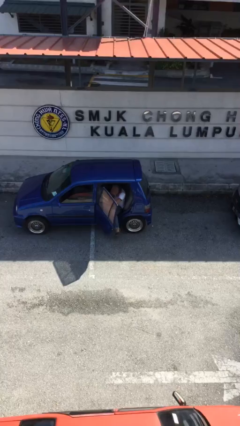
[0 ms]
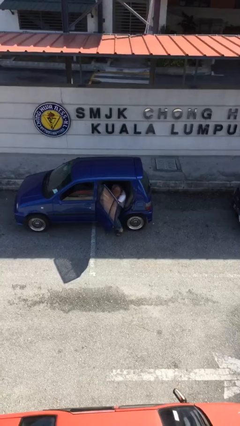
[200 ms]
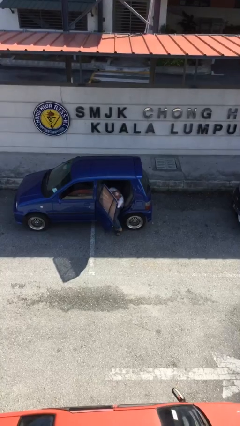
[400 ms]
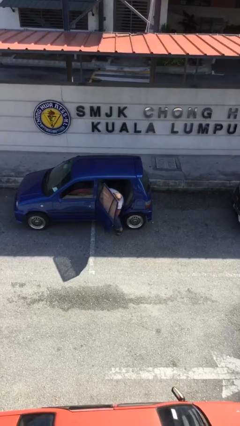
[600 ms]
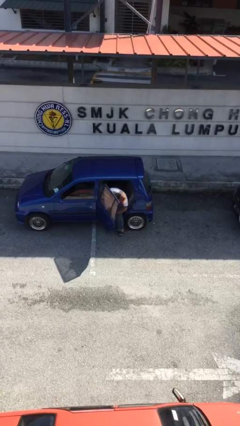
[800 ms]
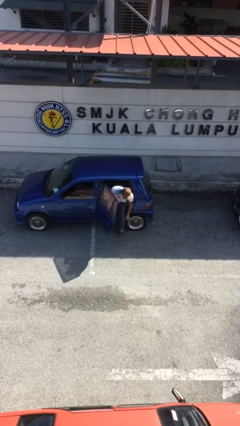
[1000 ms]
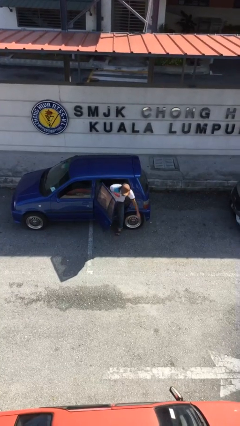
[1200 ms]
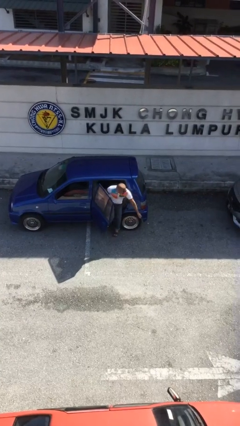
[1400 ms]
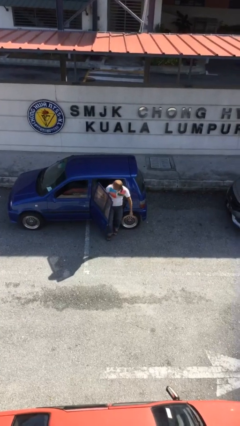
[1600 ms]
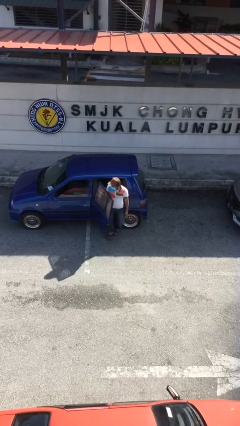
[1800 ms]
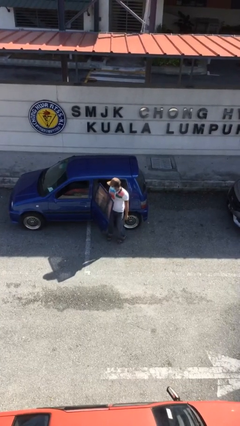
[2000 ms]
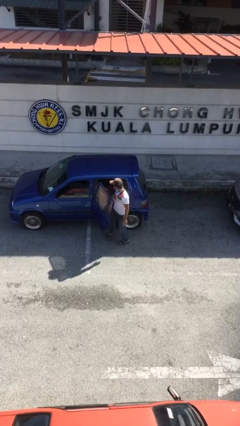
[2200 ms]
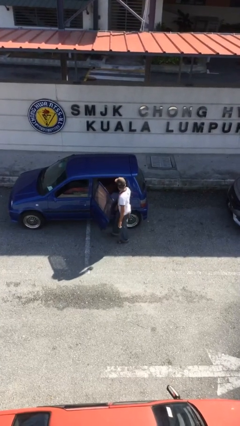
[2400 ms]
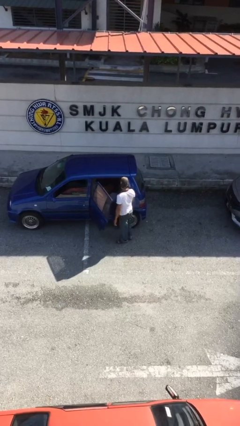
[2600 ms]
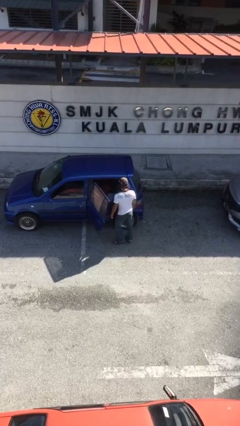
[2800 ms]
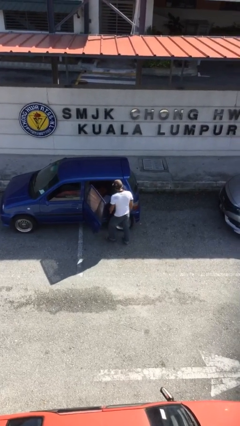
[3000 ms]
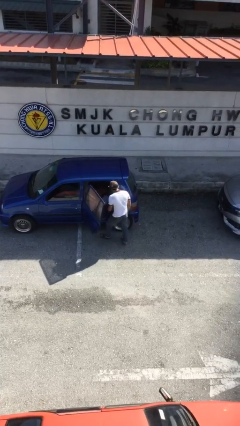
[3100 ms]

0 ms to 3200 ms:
person exits car

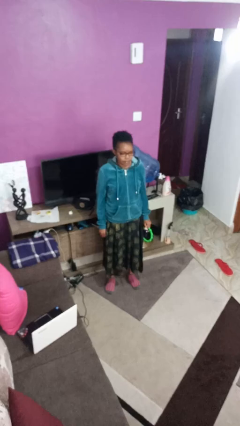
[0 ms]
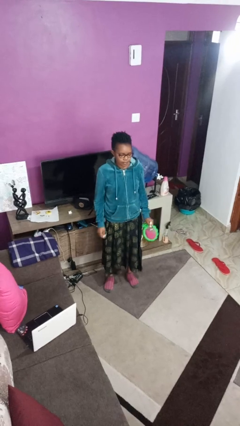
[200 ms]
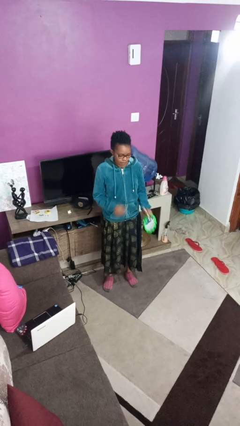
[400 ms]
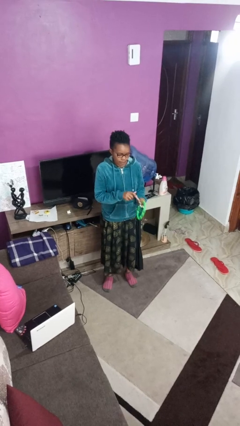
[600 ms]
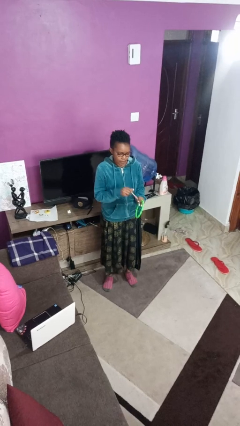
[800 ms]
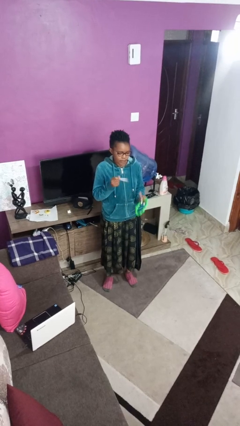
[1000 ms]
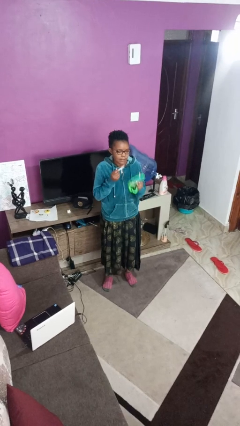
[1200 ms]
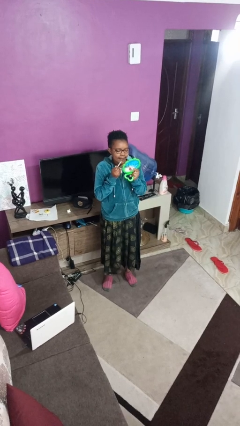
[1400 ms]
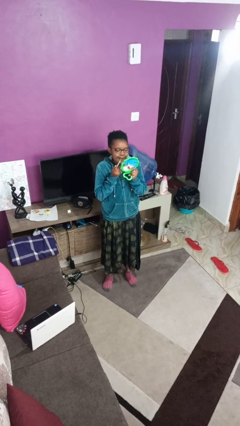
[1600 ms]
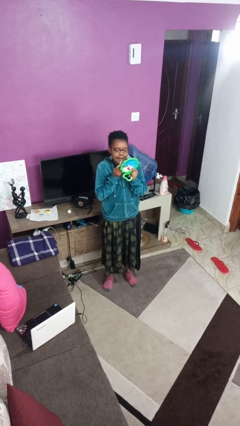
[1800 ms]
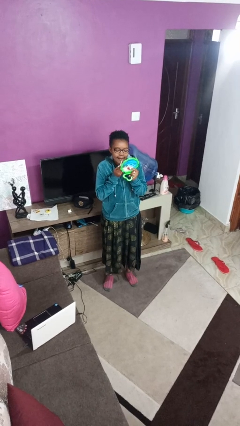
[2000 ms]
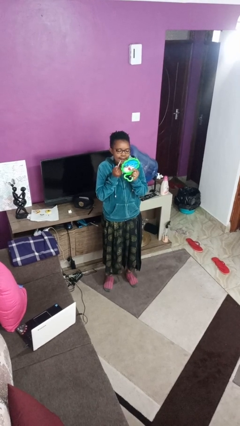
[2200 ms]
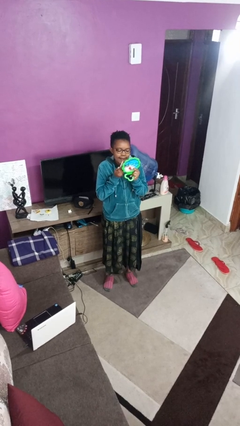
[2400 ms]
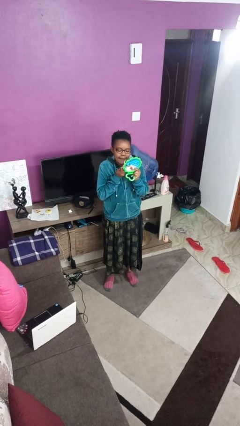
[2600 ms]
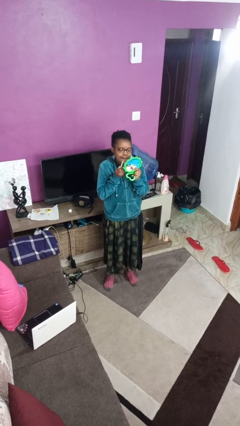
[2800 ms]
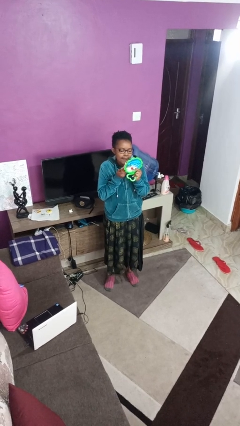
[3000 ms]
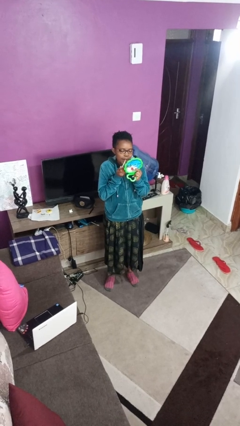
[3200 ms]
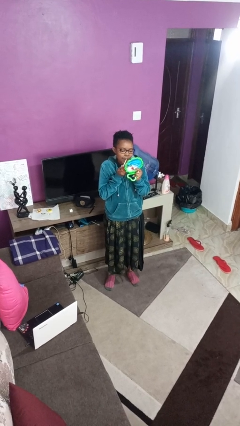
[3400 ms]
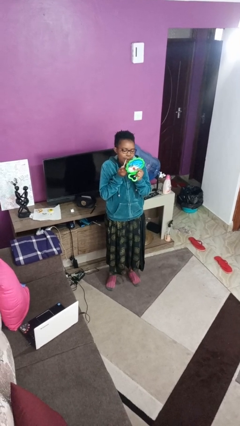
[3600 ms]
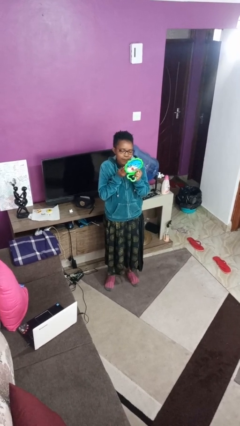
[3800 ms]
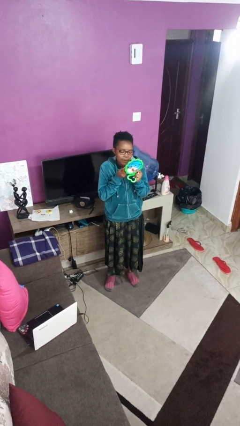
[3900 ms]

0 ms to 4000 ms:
person applies lip makeup

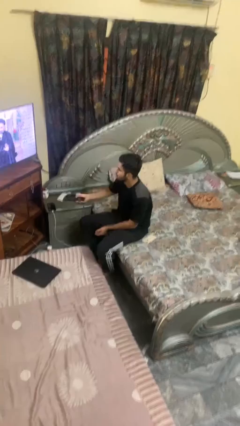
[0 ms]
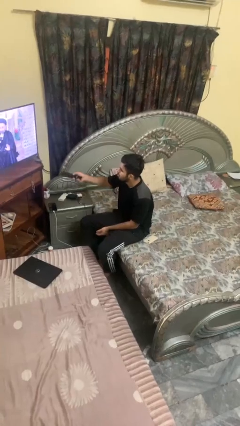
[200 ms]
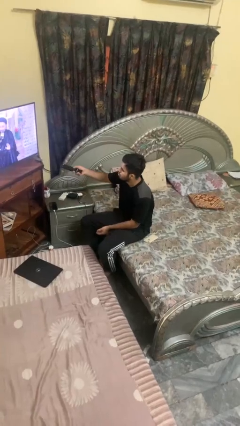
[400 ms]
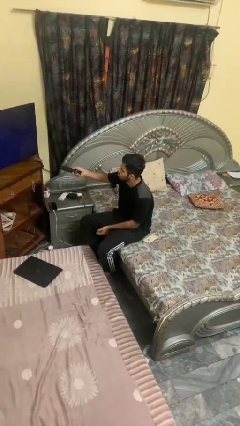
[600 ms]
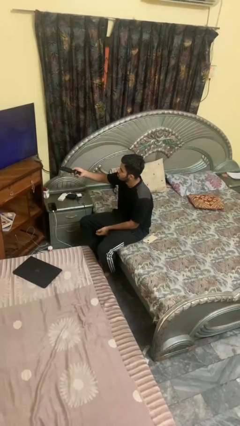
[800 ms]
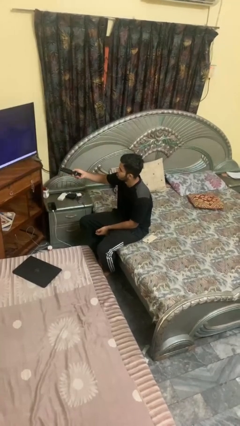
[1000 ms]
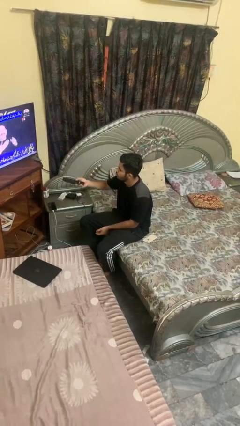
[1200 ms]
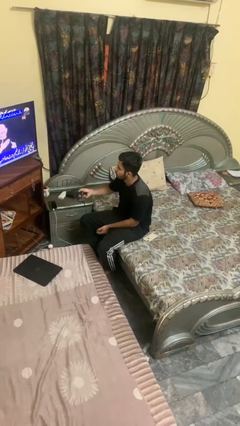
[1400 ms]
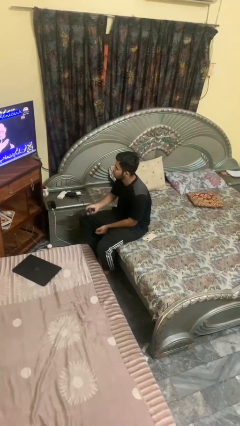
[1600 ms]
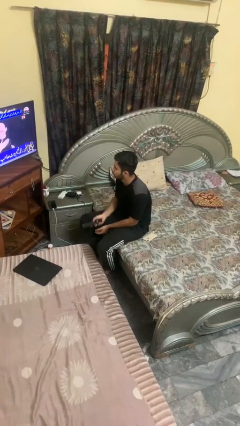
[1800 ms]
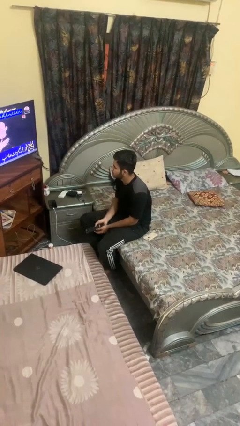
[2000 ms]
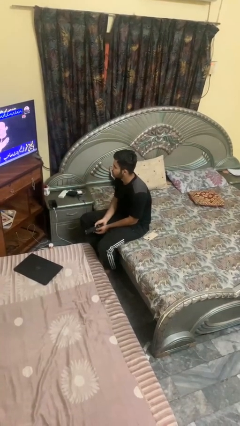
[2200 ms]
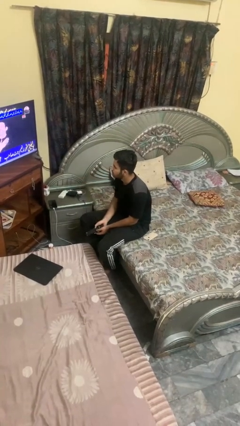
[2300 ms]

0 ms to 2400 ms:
person uses television remote

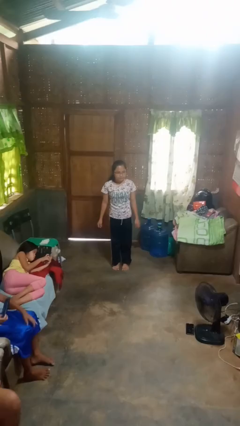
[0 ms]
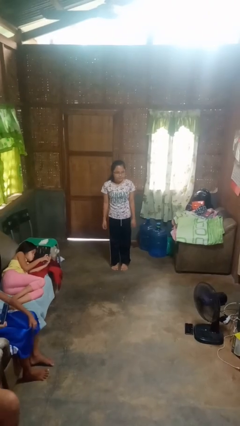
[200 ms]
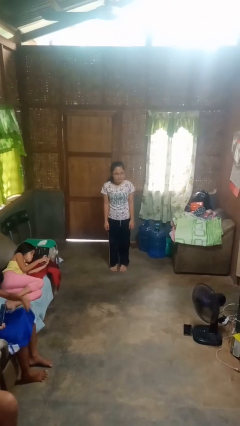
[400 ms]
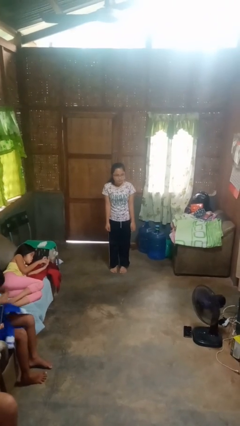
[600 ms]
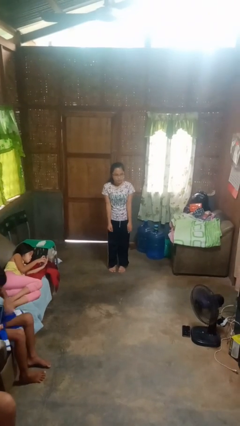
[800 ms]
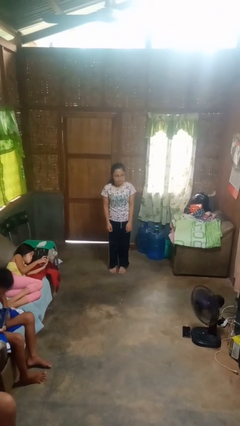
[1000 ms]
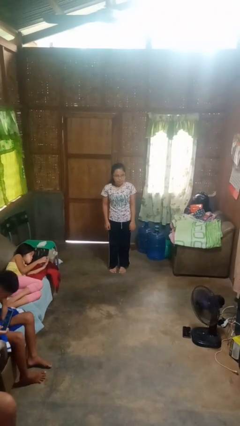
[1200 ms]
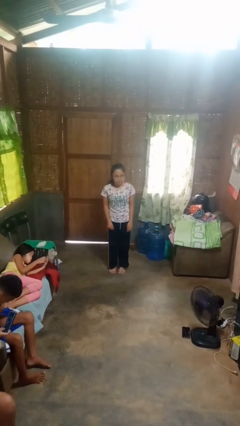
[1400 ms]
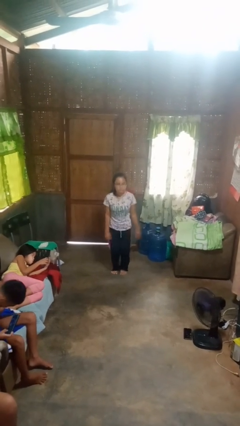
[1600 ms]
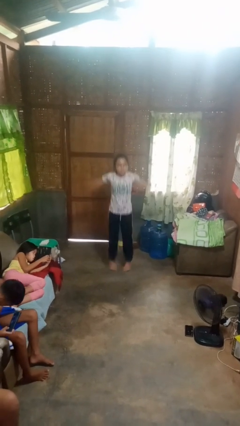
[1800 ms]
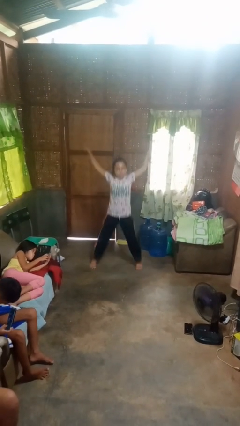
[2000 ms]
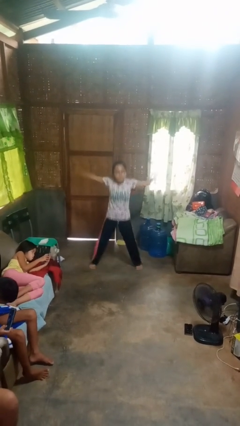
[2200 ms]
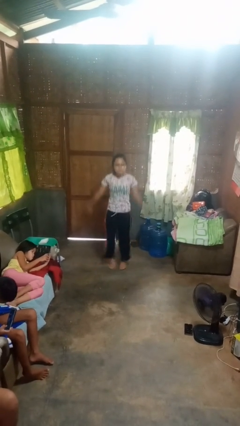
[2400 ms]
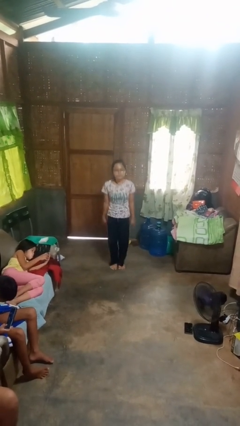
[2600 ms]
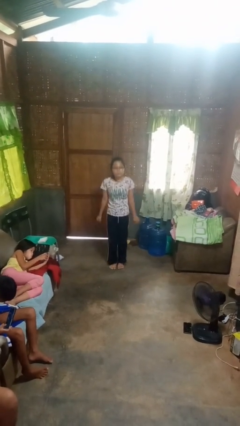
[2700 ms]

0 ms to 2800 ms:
person exercises with jumping jacks

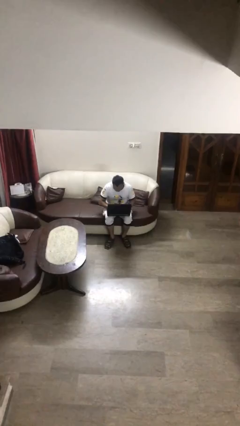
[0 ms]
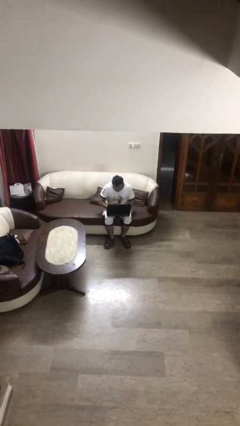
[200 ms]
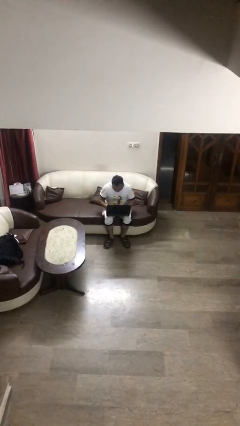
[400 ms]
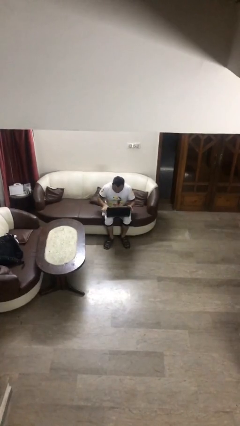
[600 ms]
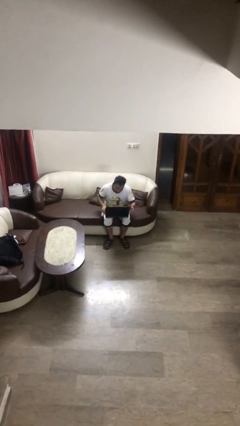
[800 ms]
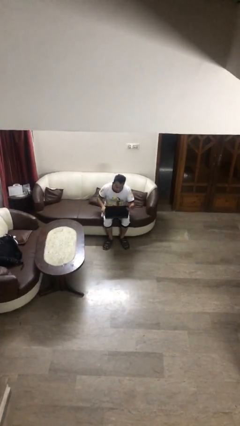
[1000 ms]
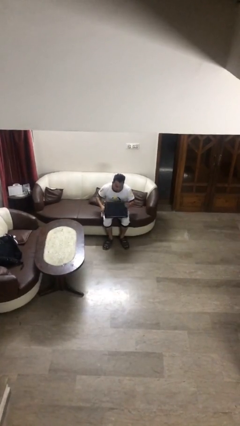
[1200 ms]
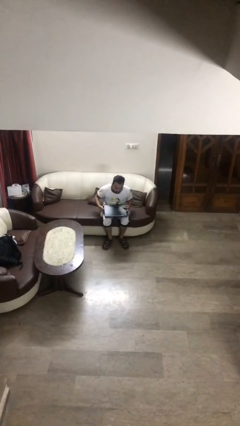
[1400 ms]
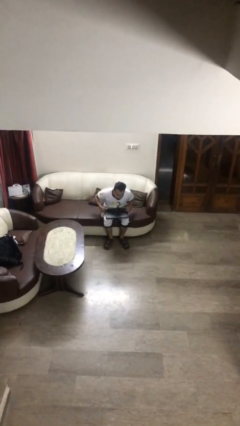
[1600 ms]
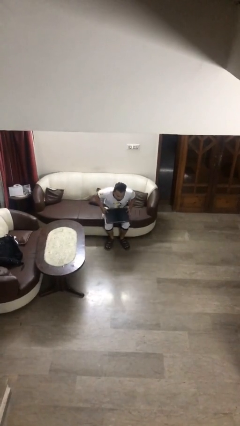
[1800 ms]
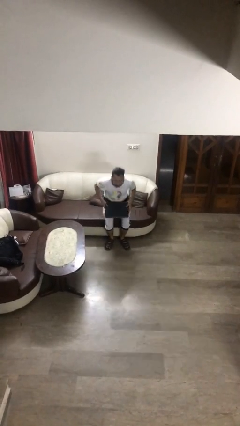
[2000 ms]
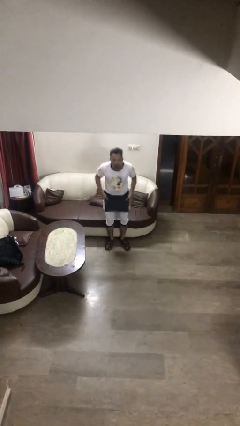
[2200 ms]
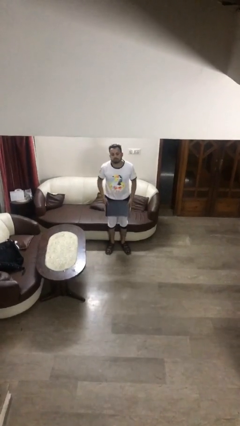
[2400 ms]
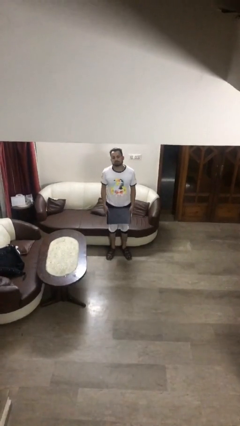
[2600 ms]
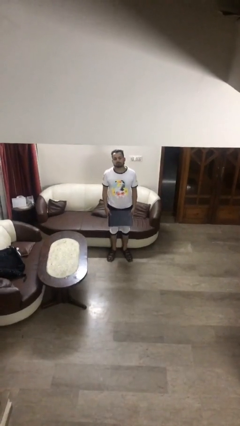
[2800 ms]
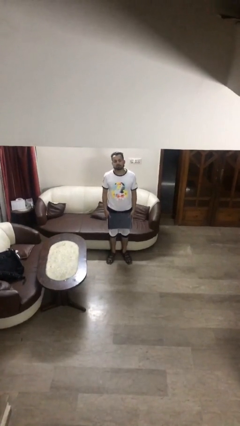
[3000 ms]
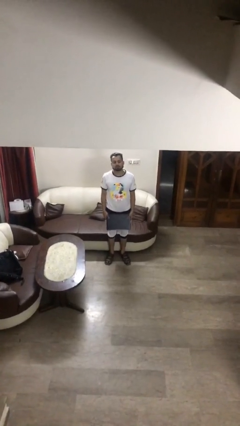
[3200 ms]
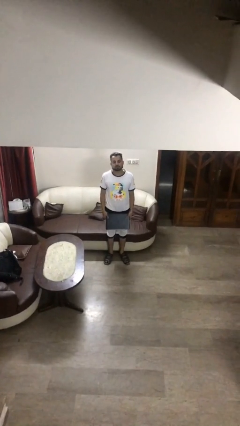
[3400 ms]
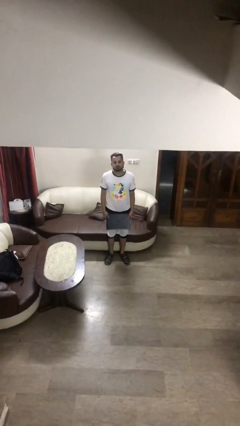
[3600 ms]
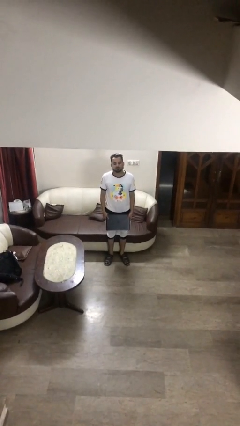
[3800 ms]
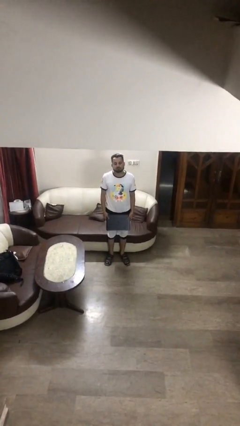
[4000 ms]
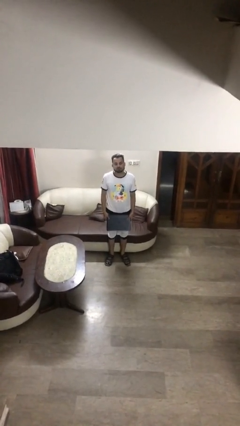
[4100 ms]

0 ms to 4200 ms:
person stands up

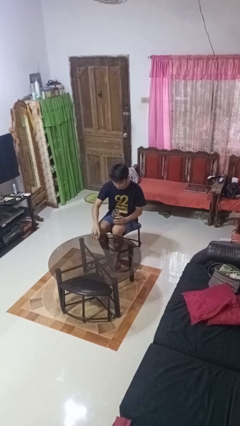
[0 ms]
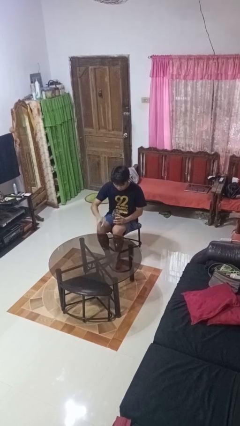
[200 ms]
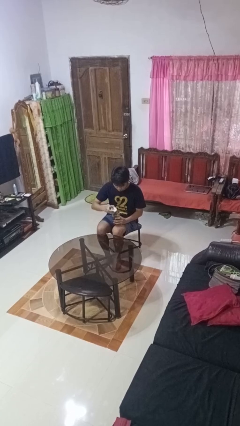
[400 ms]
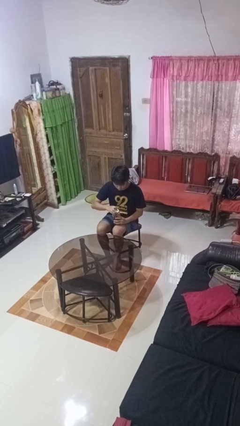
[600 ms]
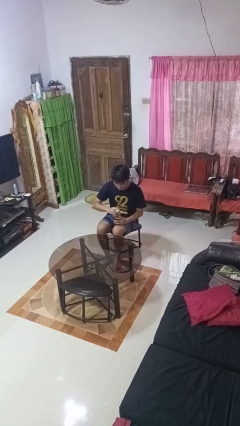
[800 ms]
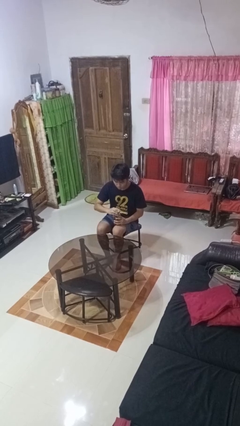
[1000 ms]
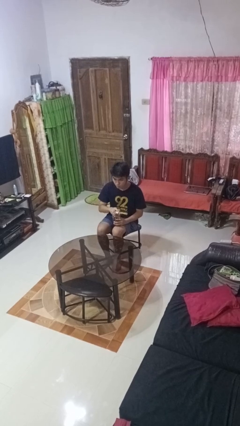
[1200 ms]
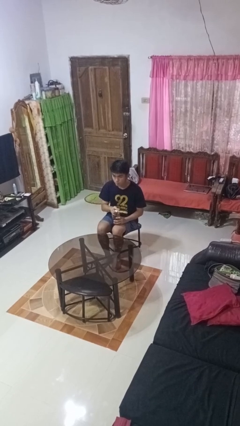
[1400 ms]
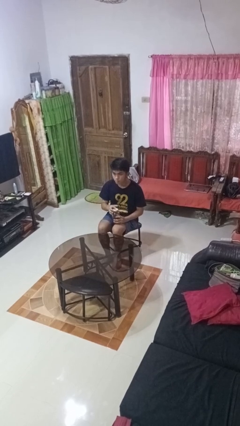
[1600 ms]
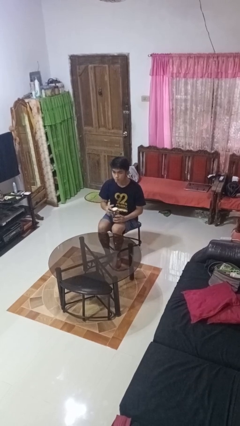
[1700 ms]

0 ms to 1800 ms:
person closes jar
